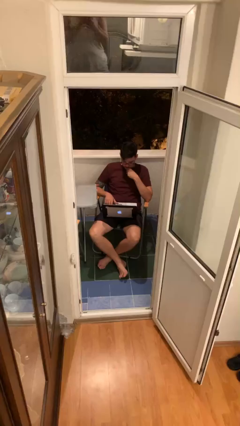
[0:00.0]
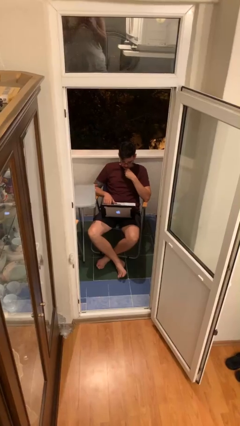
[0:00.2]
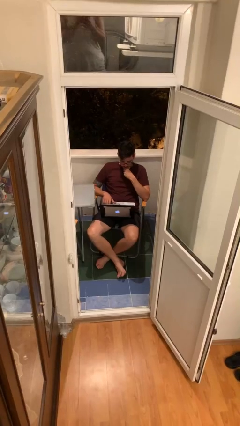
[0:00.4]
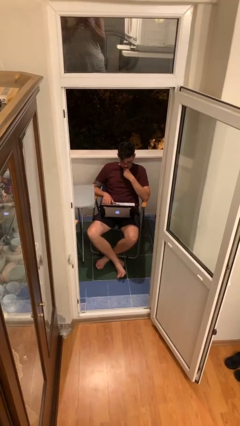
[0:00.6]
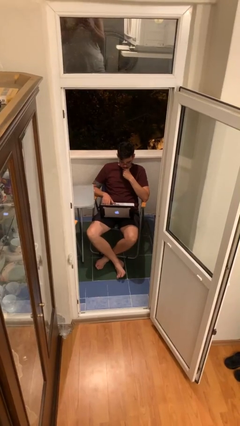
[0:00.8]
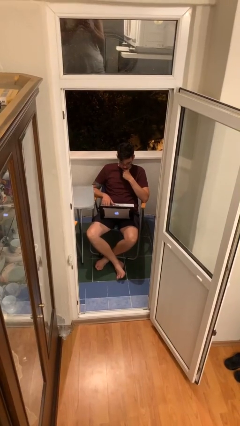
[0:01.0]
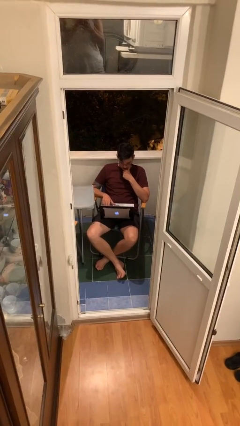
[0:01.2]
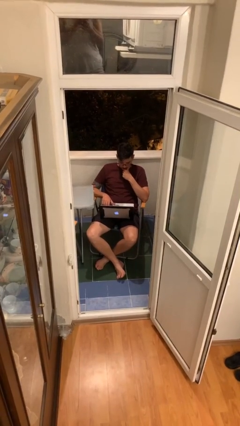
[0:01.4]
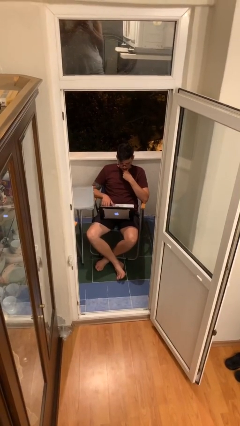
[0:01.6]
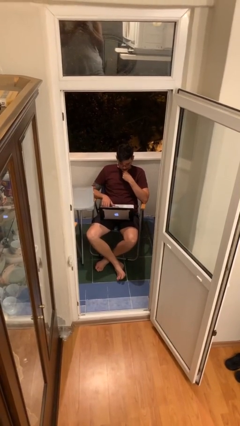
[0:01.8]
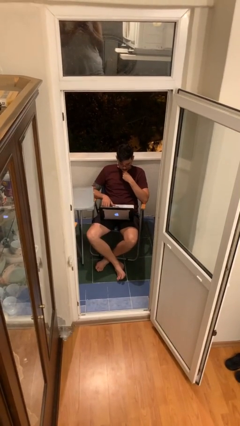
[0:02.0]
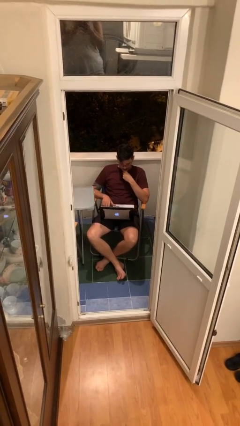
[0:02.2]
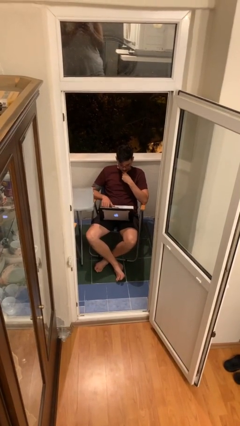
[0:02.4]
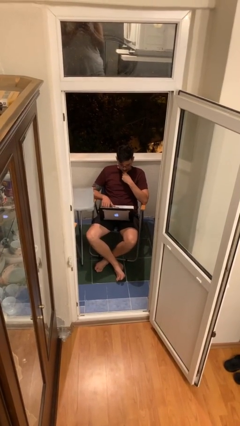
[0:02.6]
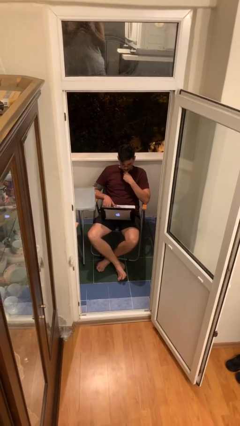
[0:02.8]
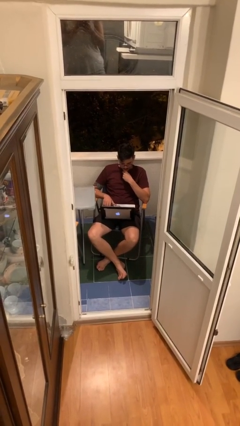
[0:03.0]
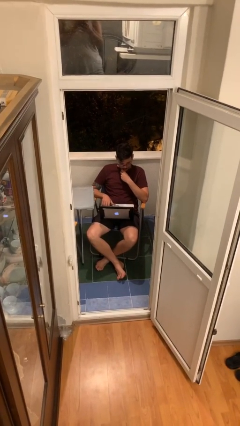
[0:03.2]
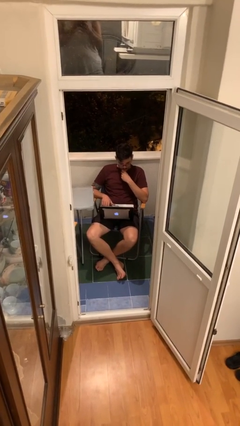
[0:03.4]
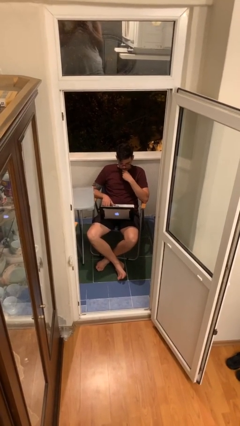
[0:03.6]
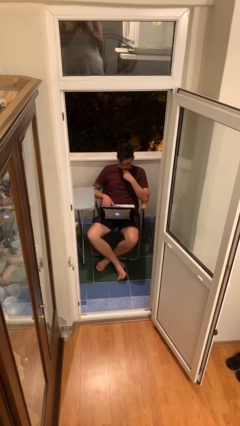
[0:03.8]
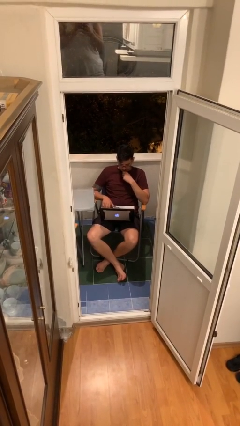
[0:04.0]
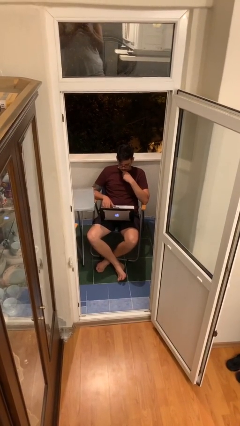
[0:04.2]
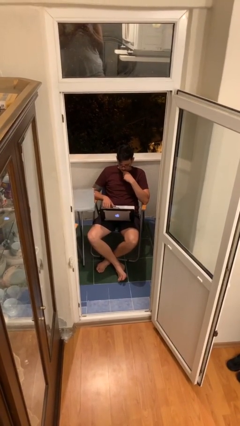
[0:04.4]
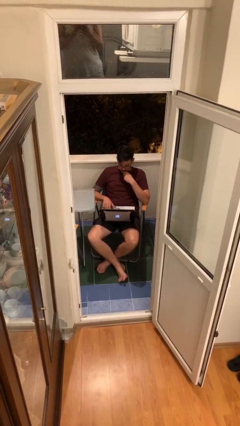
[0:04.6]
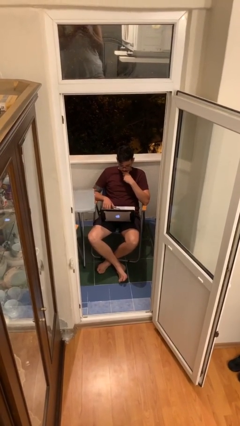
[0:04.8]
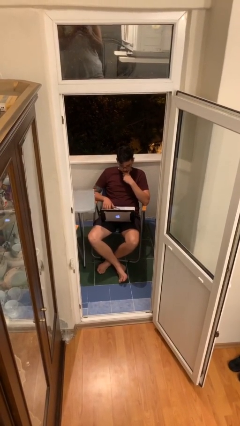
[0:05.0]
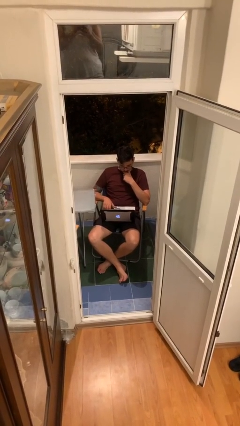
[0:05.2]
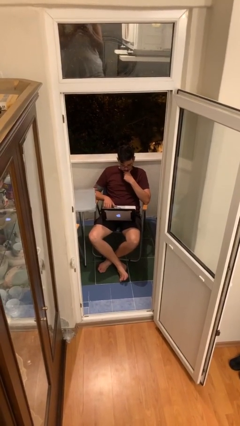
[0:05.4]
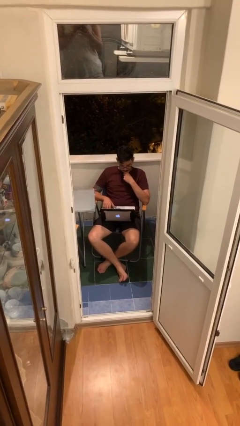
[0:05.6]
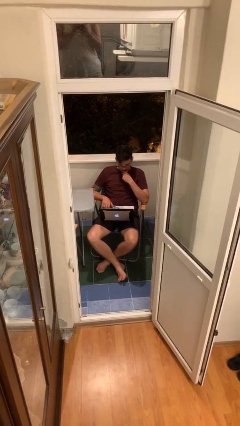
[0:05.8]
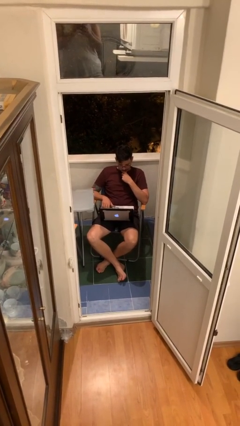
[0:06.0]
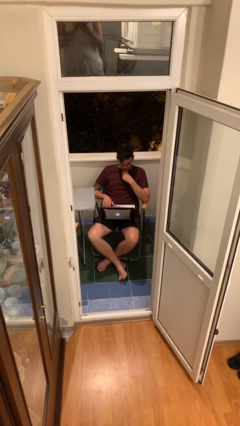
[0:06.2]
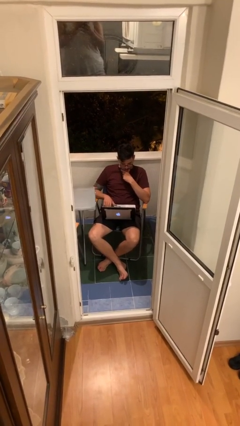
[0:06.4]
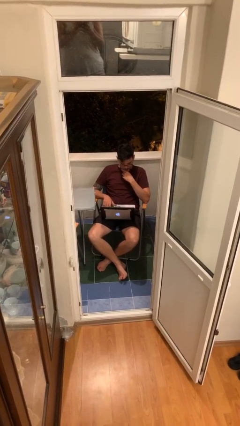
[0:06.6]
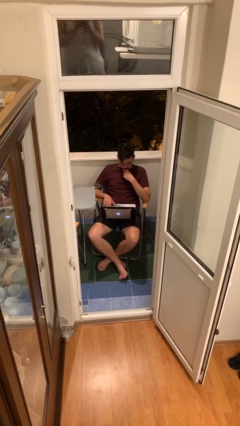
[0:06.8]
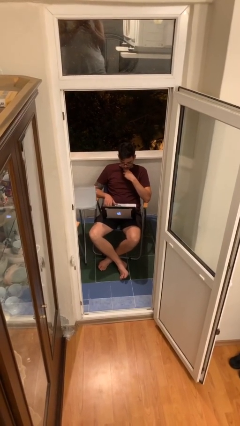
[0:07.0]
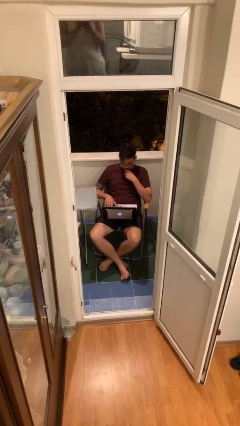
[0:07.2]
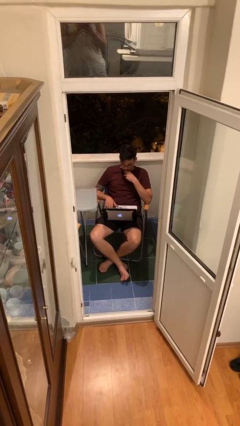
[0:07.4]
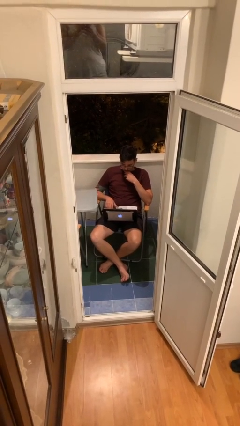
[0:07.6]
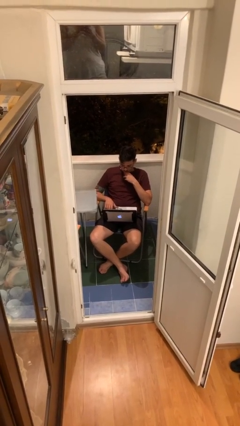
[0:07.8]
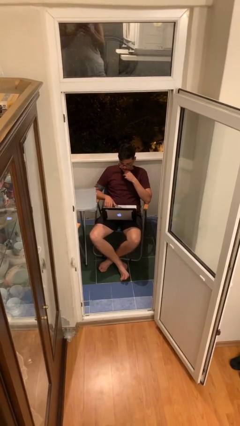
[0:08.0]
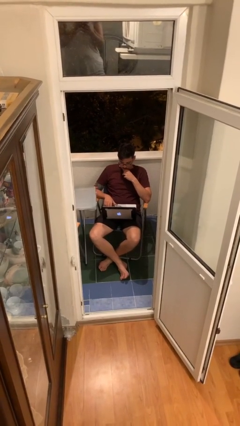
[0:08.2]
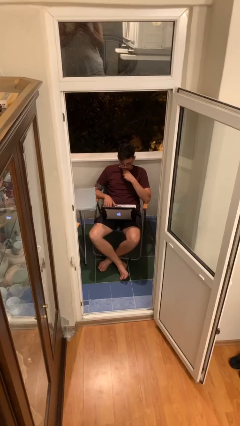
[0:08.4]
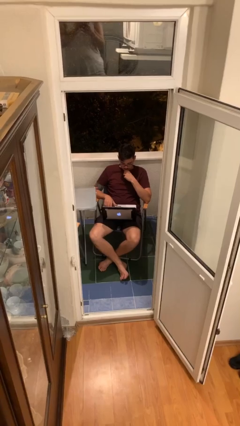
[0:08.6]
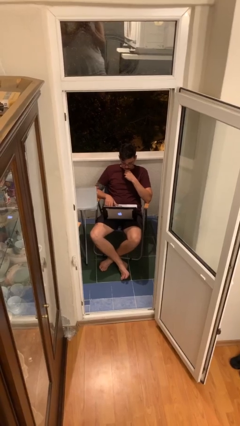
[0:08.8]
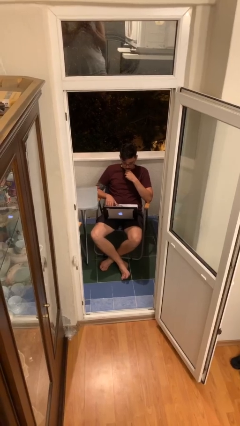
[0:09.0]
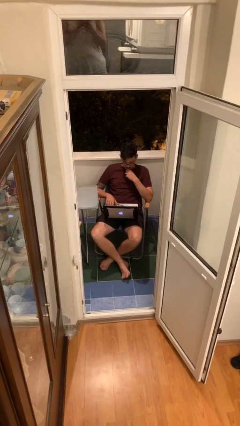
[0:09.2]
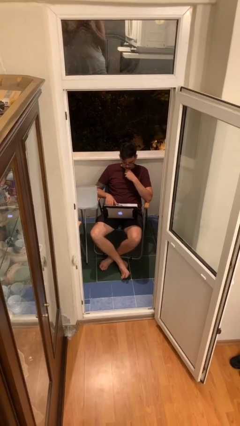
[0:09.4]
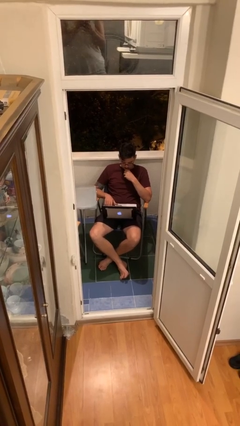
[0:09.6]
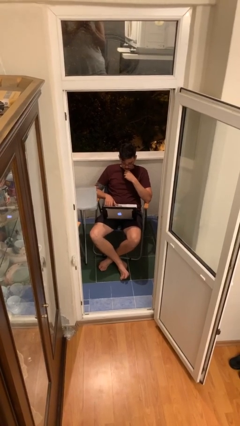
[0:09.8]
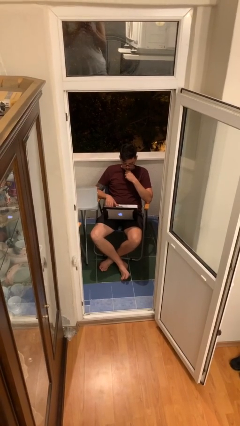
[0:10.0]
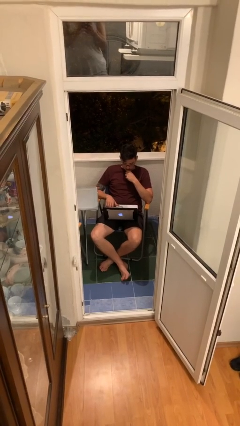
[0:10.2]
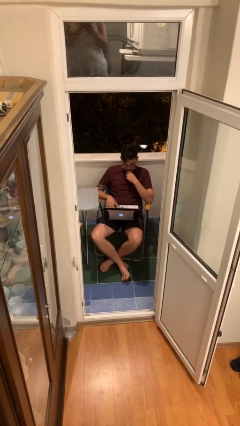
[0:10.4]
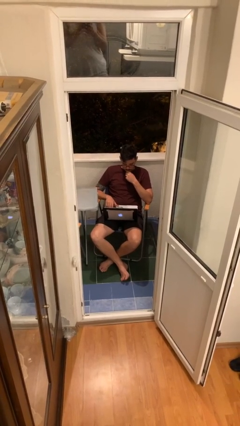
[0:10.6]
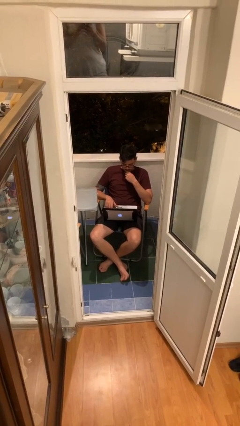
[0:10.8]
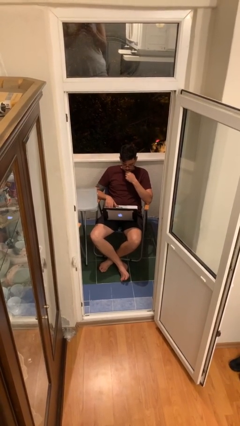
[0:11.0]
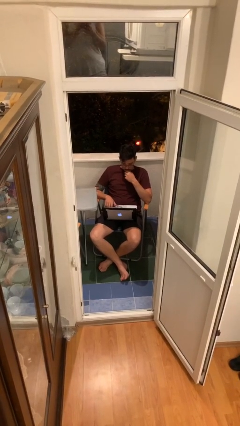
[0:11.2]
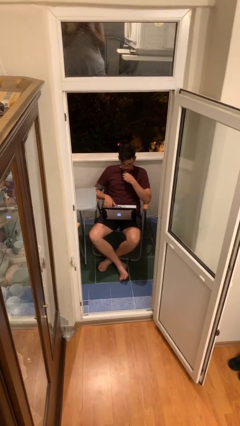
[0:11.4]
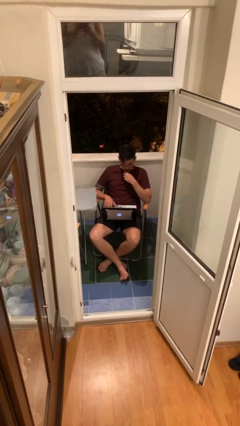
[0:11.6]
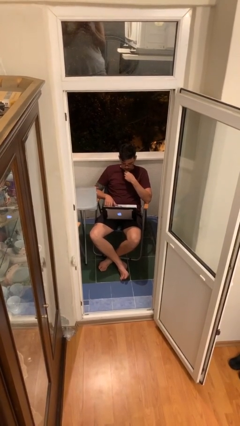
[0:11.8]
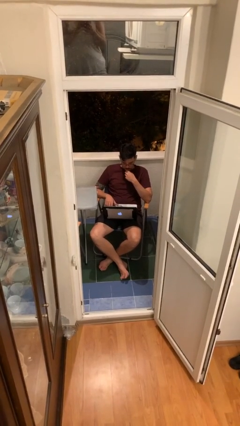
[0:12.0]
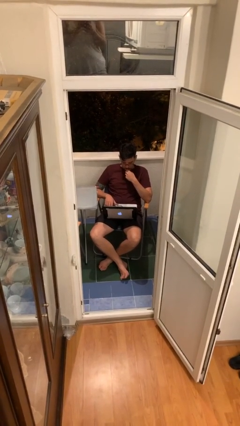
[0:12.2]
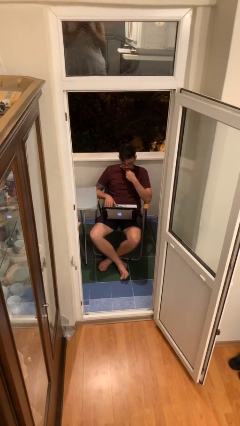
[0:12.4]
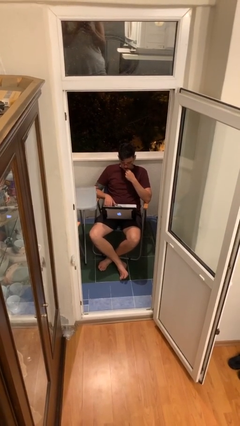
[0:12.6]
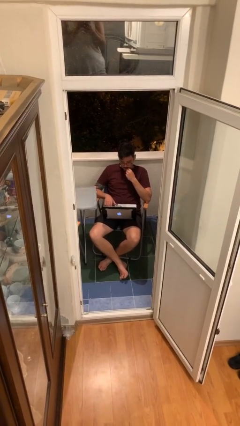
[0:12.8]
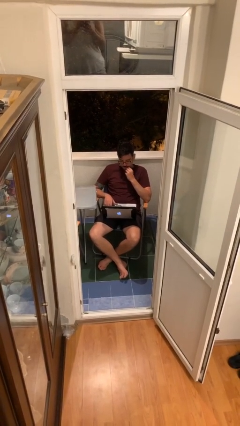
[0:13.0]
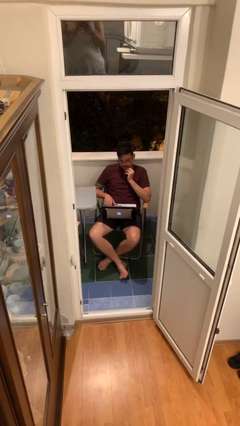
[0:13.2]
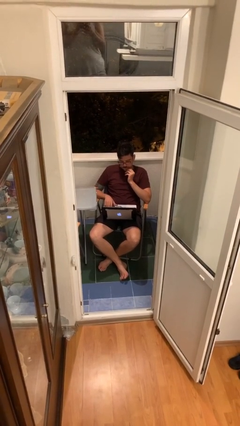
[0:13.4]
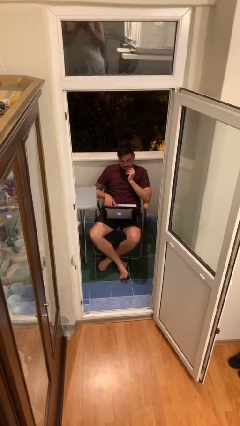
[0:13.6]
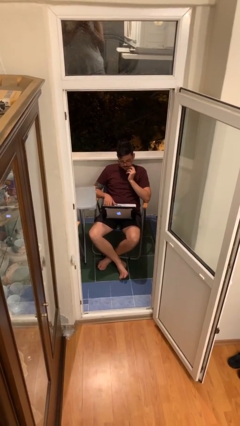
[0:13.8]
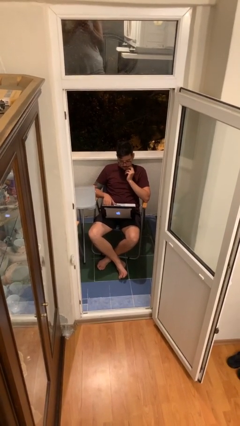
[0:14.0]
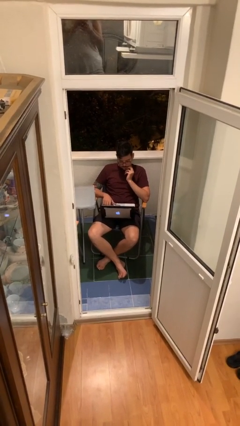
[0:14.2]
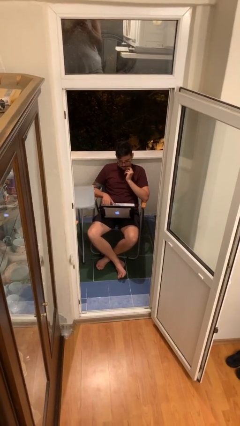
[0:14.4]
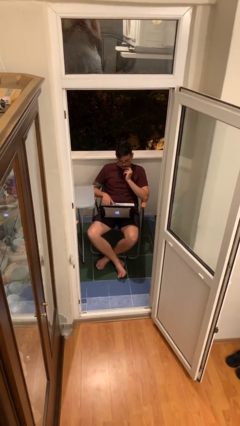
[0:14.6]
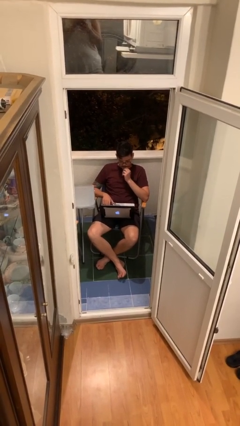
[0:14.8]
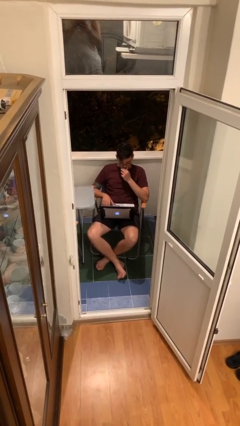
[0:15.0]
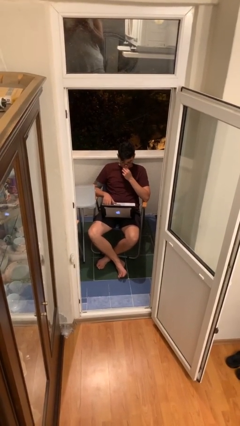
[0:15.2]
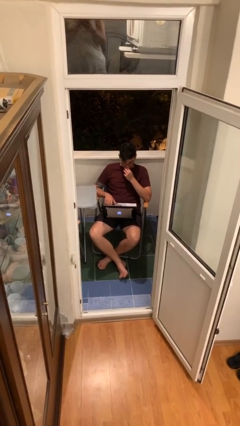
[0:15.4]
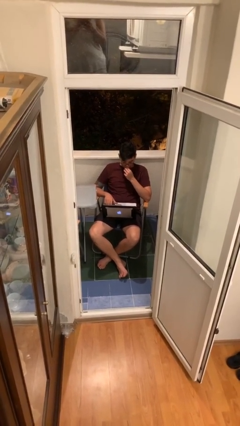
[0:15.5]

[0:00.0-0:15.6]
person interacts with laptop

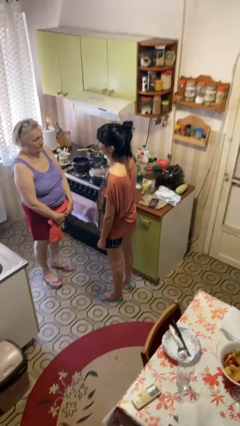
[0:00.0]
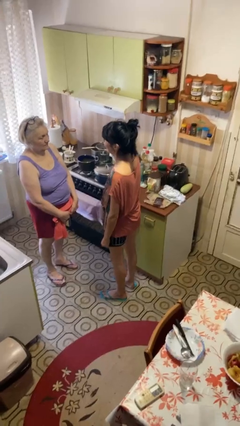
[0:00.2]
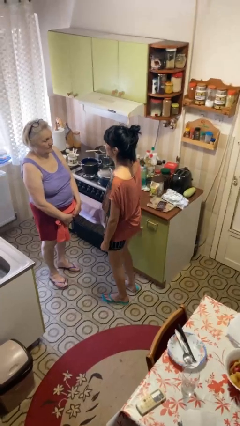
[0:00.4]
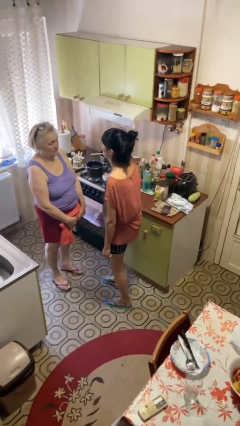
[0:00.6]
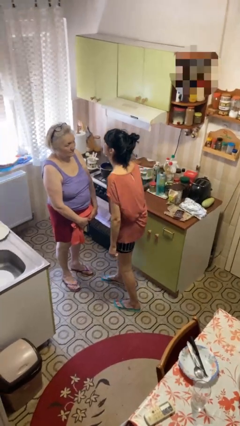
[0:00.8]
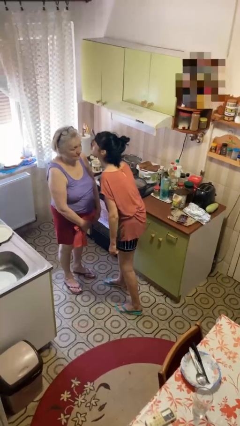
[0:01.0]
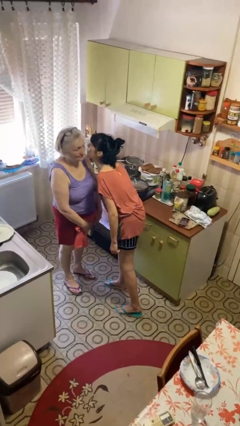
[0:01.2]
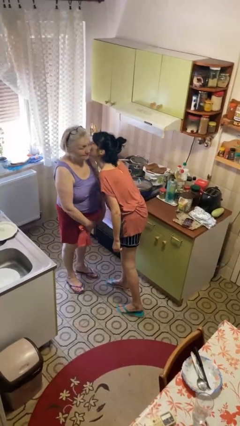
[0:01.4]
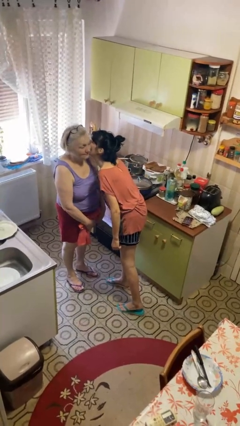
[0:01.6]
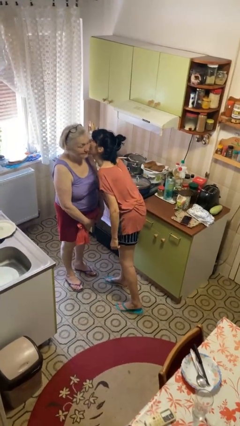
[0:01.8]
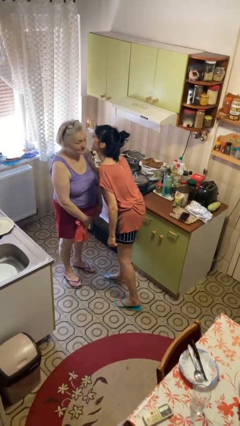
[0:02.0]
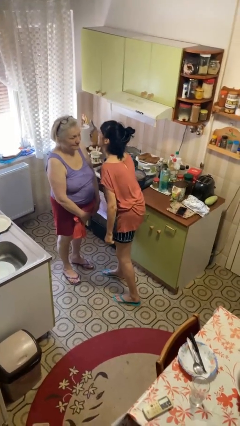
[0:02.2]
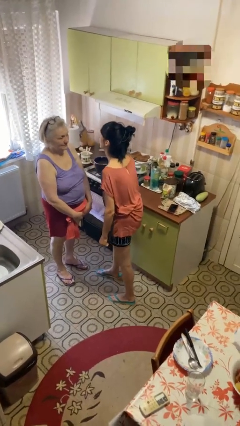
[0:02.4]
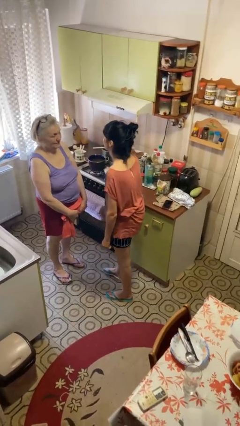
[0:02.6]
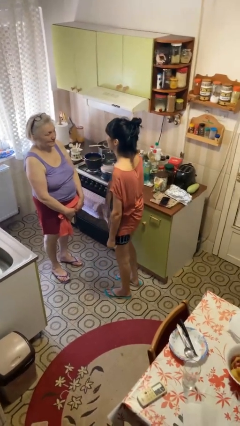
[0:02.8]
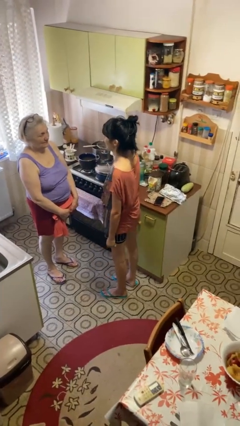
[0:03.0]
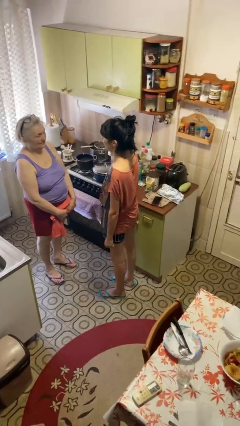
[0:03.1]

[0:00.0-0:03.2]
person kisses cheek of person
